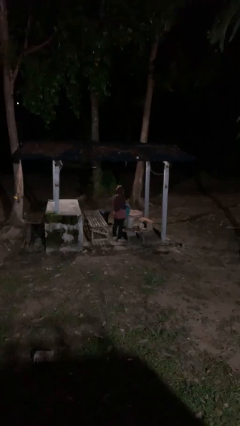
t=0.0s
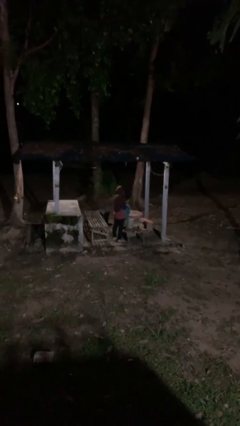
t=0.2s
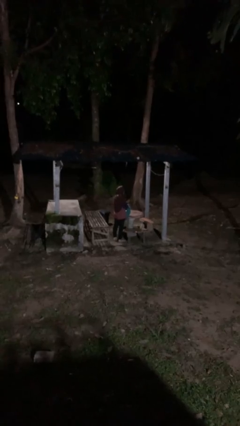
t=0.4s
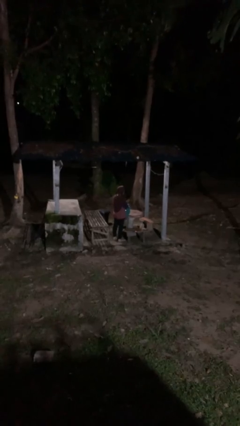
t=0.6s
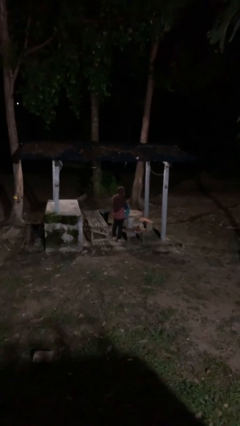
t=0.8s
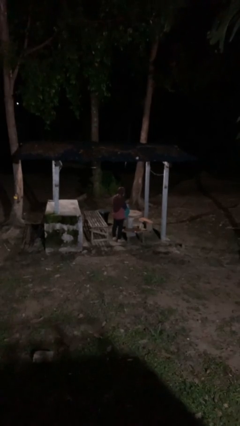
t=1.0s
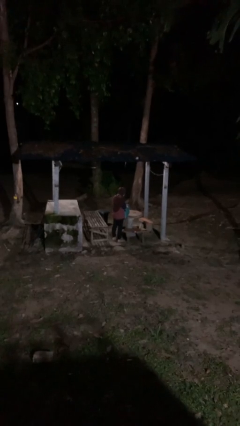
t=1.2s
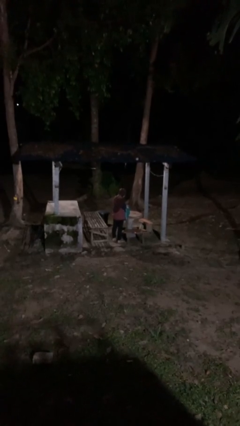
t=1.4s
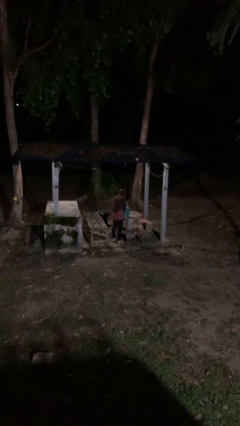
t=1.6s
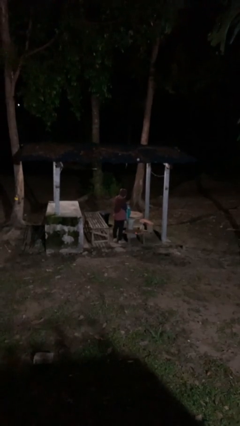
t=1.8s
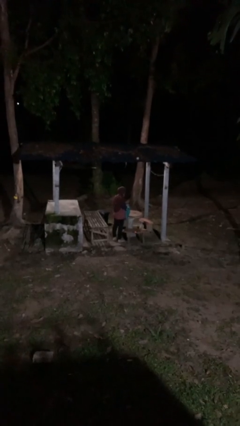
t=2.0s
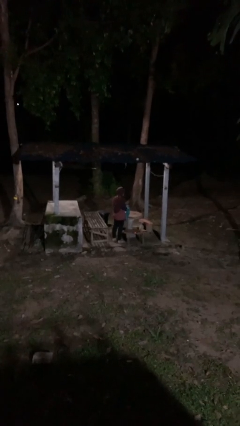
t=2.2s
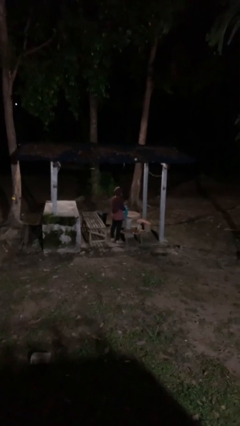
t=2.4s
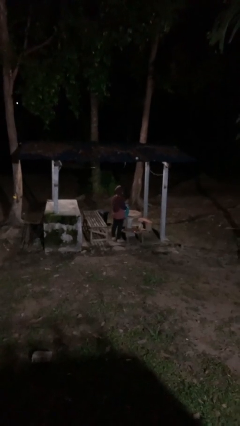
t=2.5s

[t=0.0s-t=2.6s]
person searches in bag

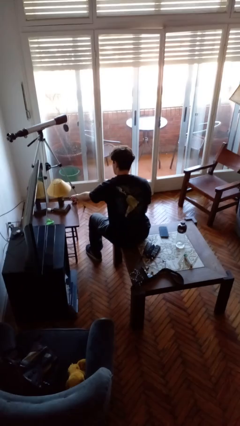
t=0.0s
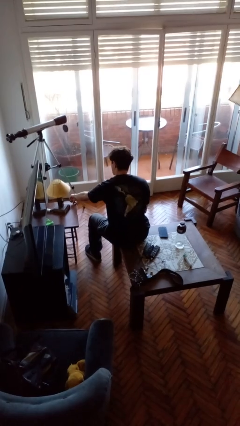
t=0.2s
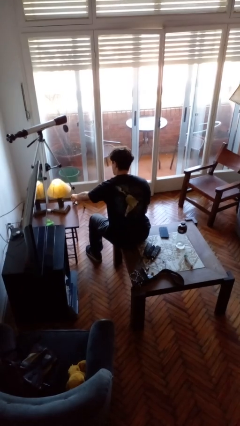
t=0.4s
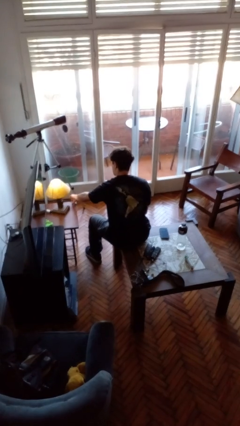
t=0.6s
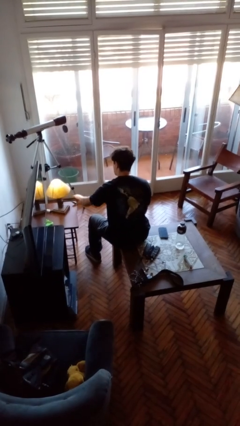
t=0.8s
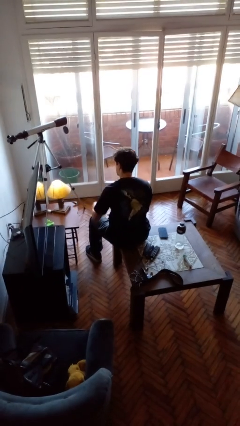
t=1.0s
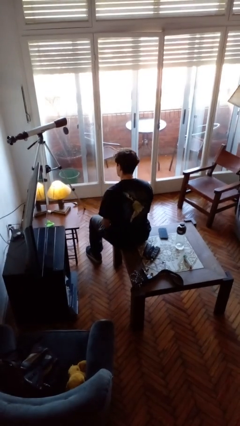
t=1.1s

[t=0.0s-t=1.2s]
person turns on lamp

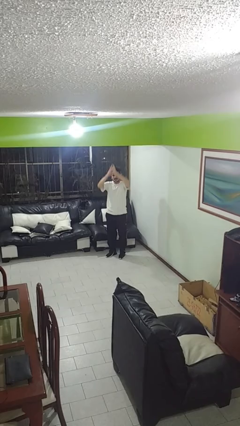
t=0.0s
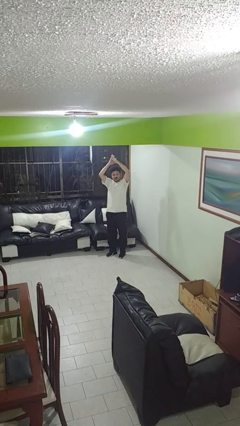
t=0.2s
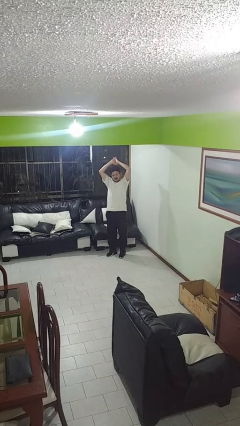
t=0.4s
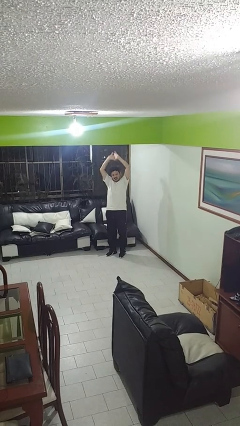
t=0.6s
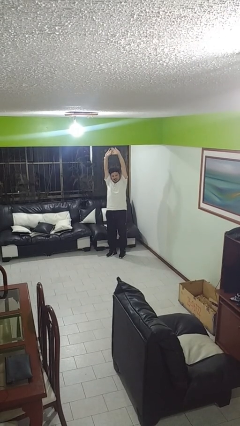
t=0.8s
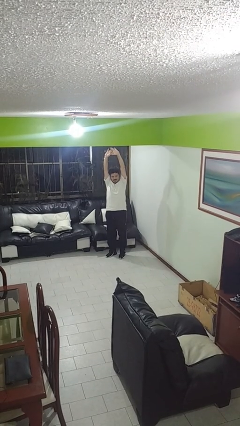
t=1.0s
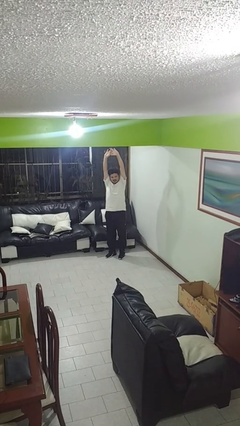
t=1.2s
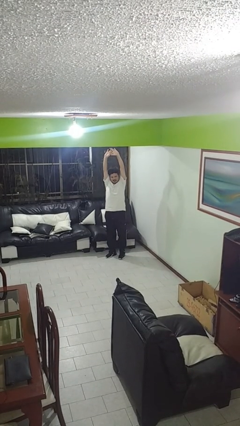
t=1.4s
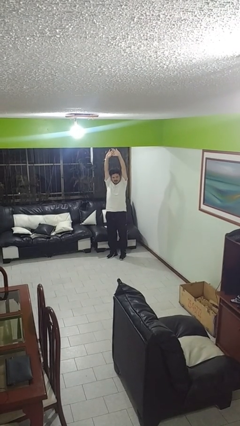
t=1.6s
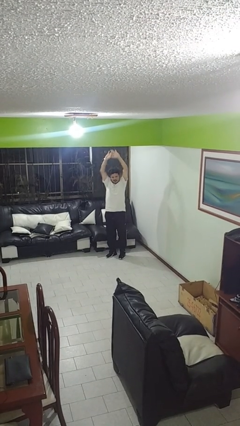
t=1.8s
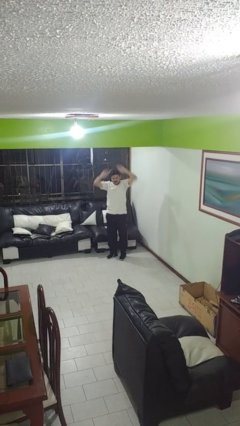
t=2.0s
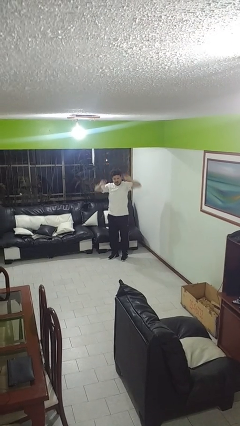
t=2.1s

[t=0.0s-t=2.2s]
person stretches arms over head

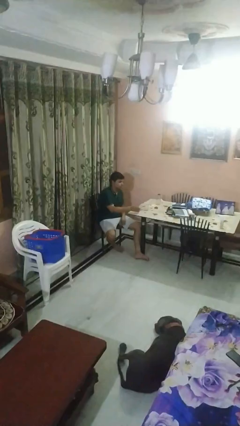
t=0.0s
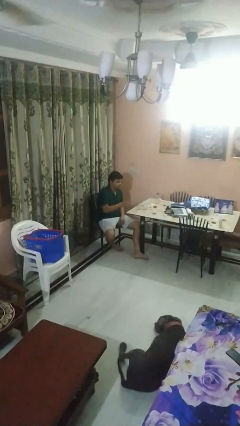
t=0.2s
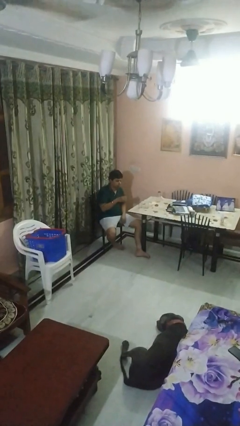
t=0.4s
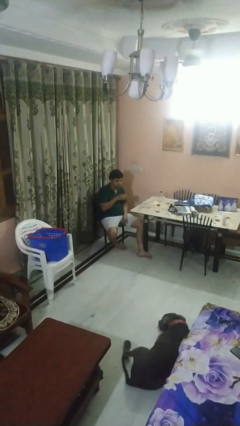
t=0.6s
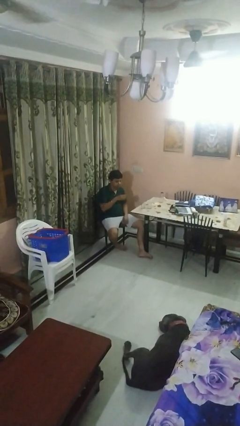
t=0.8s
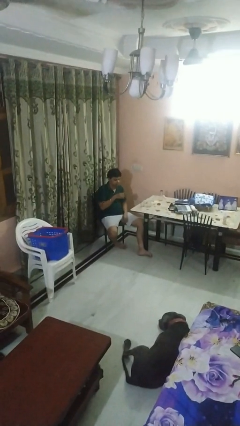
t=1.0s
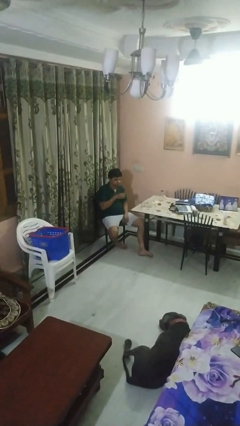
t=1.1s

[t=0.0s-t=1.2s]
person picks up object from table

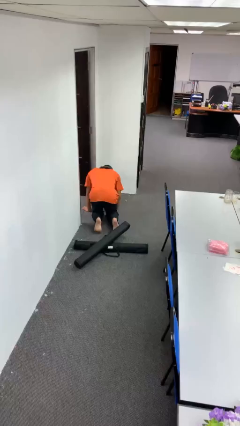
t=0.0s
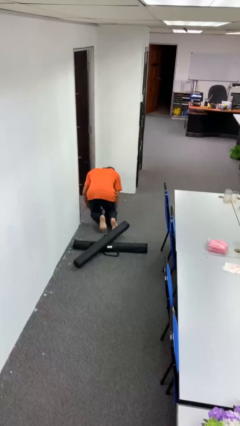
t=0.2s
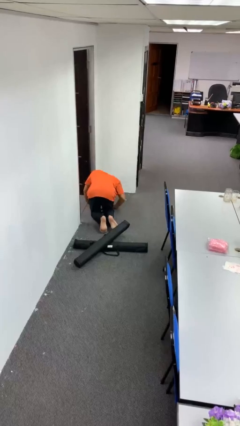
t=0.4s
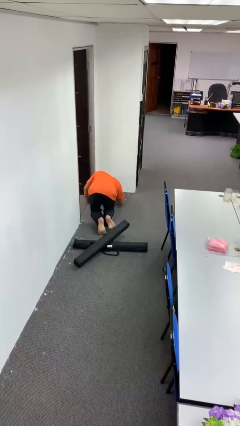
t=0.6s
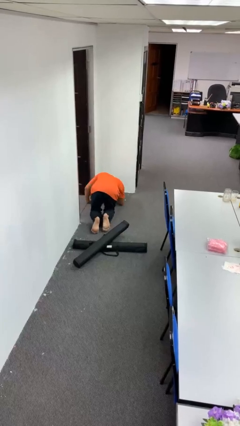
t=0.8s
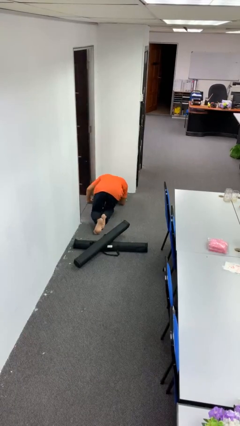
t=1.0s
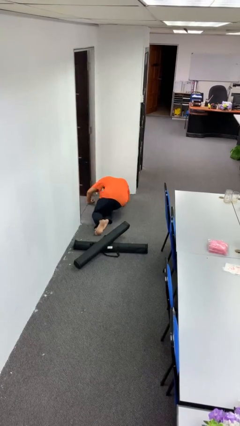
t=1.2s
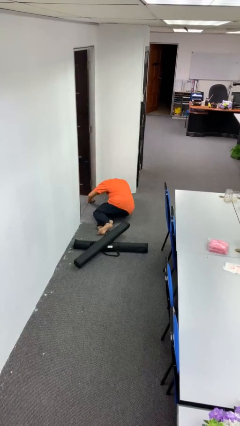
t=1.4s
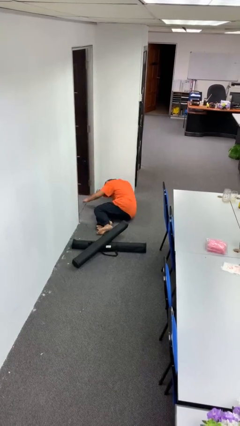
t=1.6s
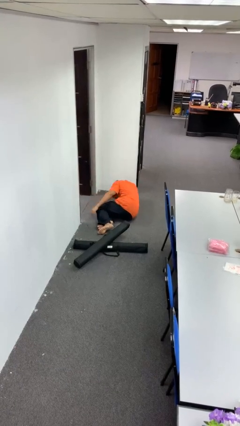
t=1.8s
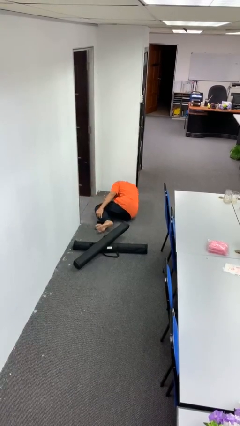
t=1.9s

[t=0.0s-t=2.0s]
person lies down on floor

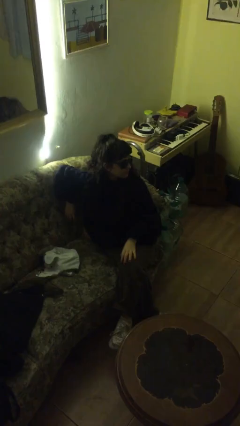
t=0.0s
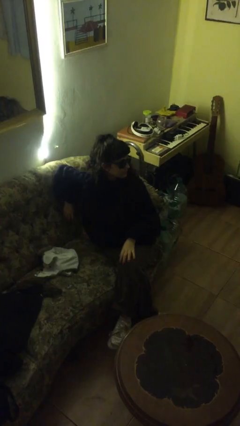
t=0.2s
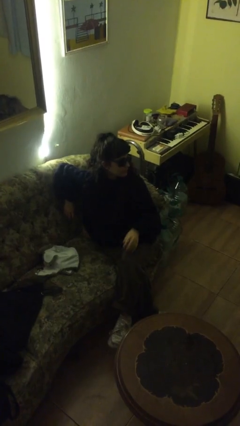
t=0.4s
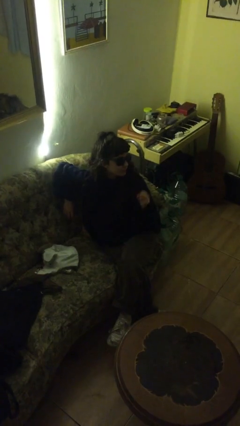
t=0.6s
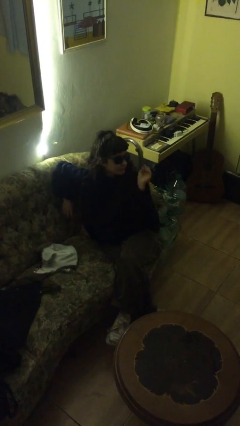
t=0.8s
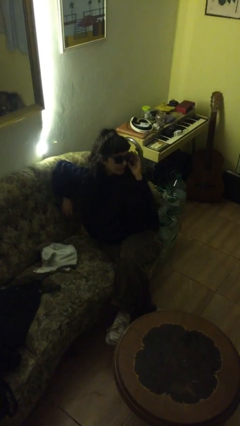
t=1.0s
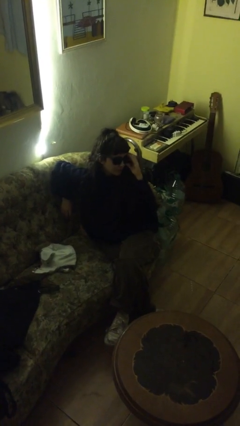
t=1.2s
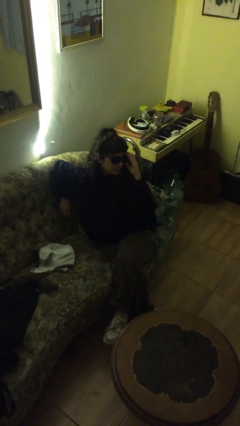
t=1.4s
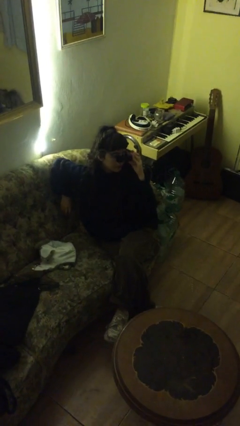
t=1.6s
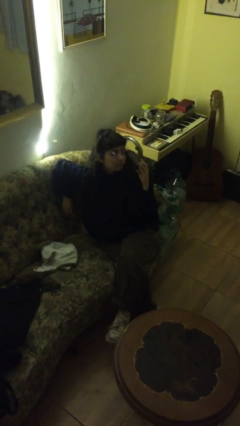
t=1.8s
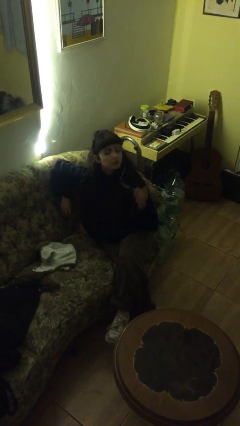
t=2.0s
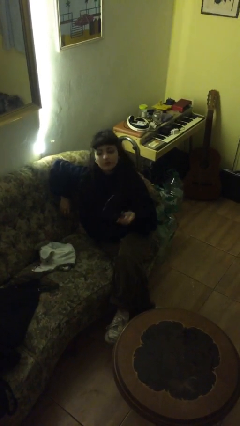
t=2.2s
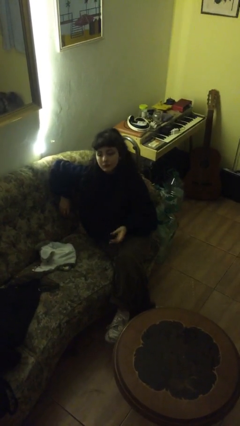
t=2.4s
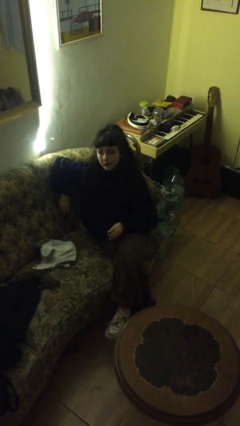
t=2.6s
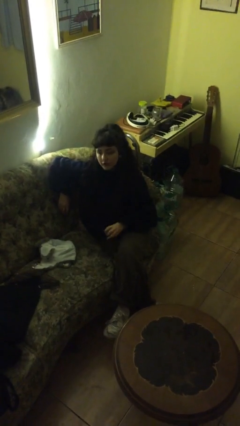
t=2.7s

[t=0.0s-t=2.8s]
person takes off sunglasses

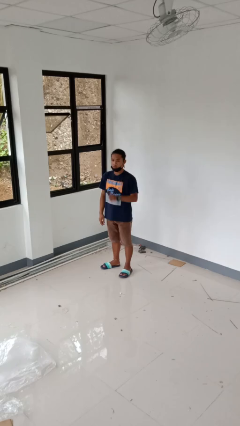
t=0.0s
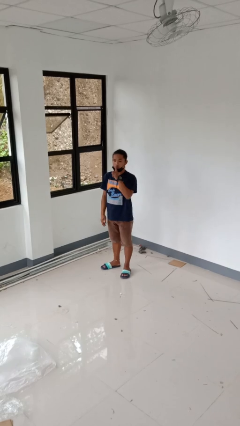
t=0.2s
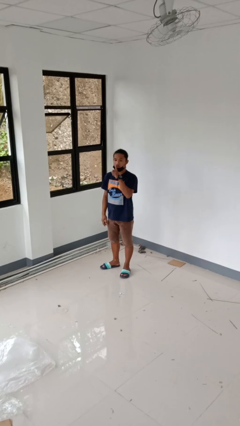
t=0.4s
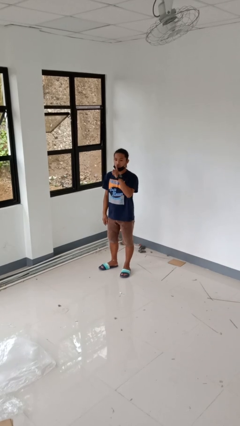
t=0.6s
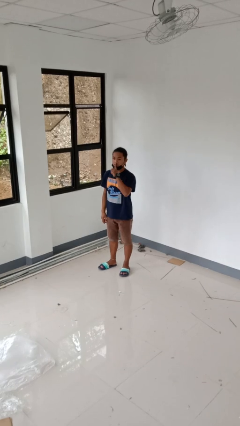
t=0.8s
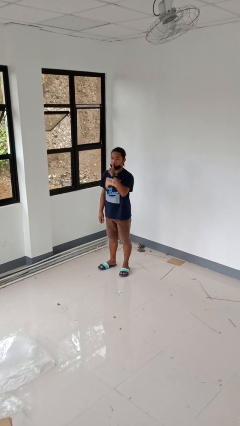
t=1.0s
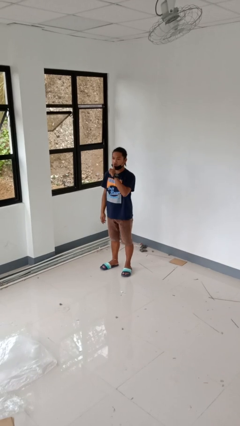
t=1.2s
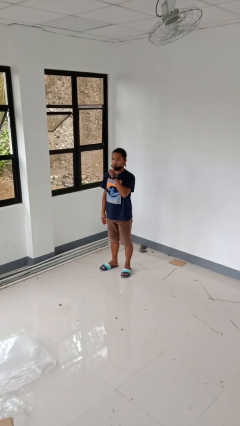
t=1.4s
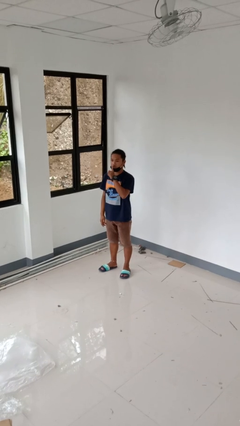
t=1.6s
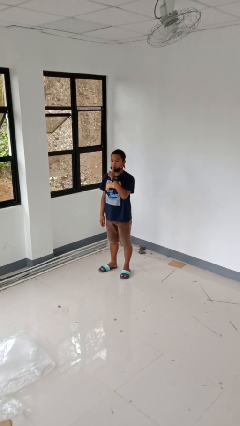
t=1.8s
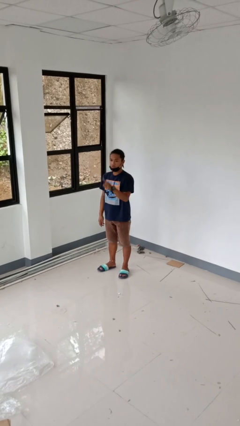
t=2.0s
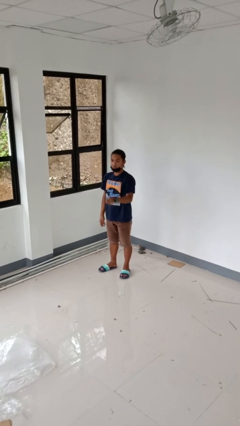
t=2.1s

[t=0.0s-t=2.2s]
person gestures be quiet

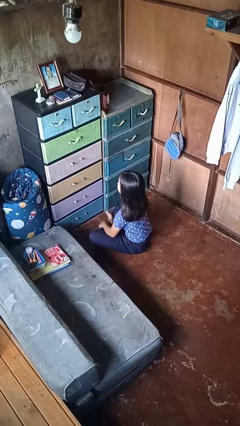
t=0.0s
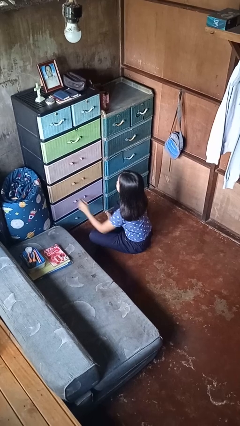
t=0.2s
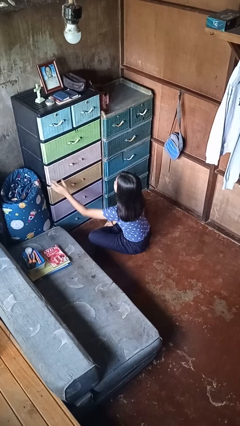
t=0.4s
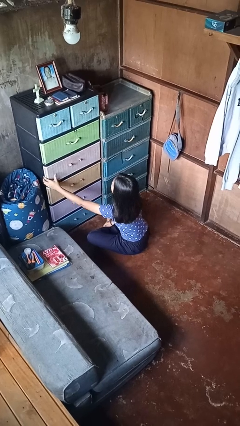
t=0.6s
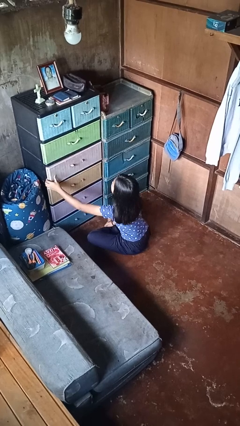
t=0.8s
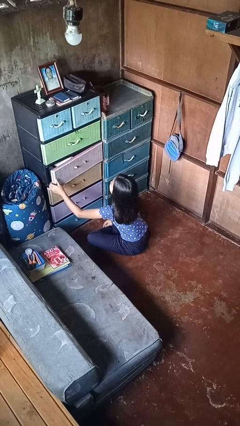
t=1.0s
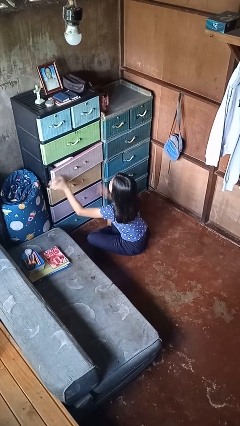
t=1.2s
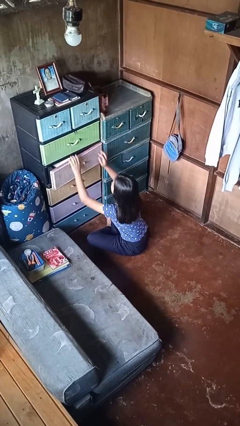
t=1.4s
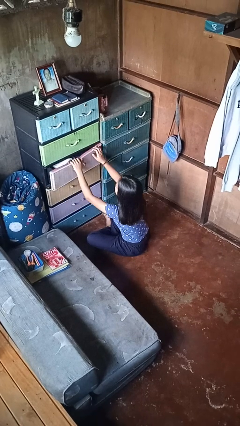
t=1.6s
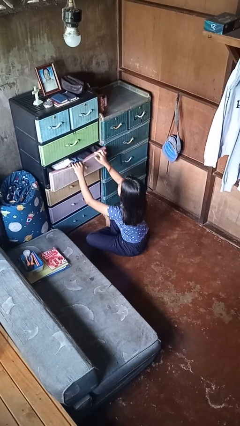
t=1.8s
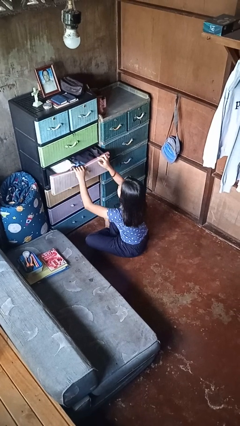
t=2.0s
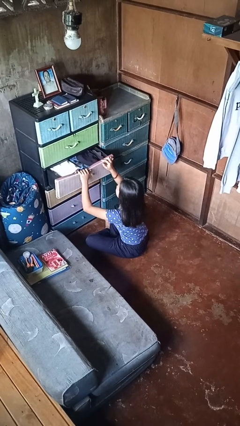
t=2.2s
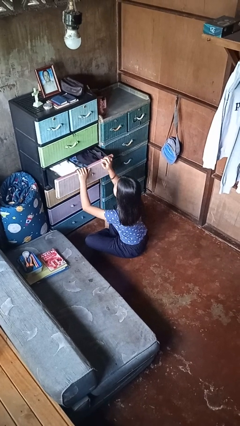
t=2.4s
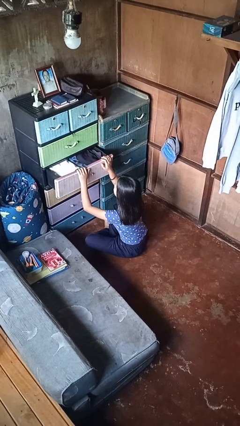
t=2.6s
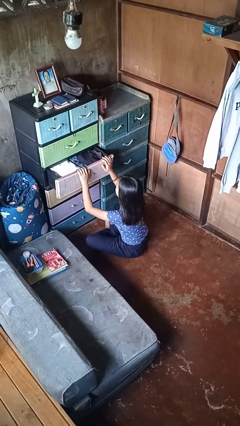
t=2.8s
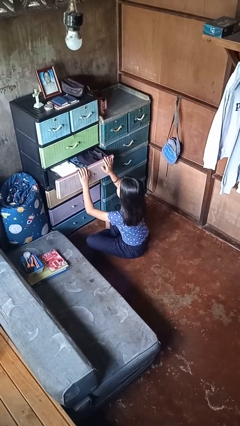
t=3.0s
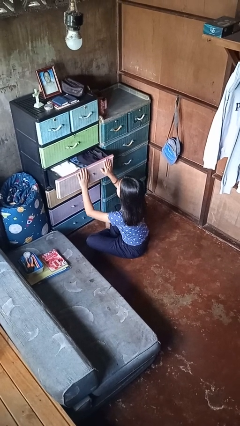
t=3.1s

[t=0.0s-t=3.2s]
person opens dresser drawer
